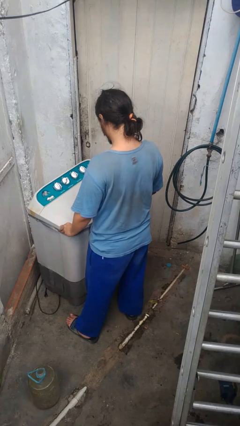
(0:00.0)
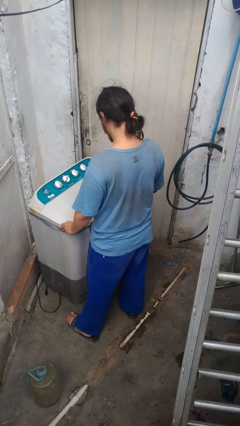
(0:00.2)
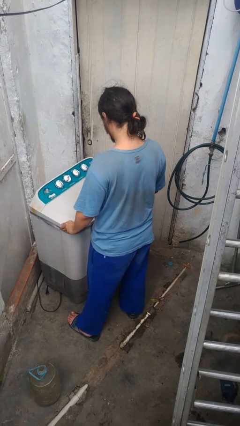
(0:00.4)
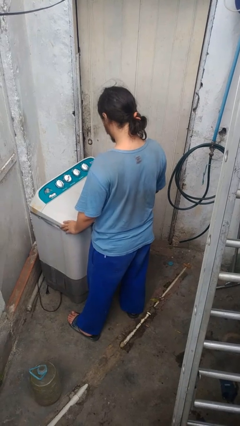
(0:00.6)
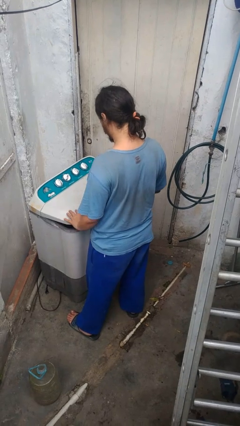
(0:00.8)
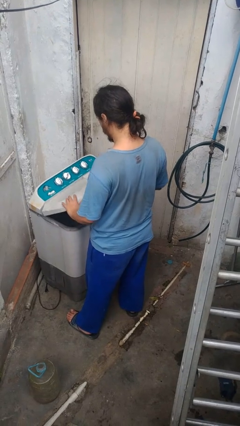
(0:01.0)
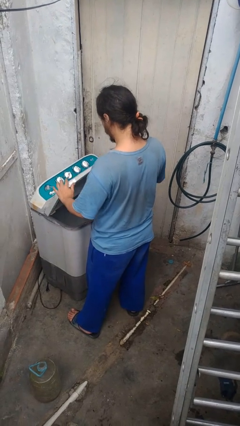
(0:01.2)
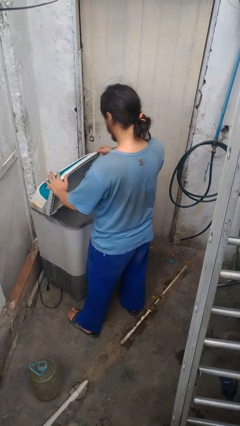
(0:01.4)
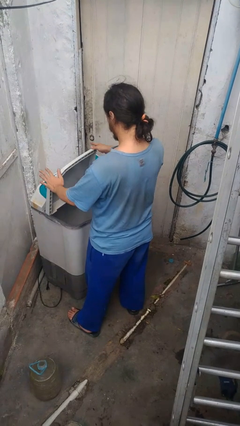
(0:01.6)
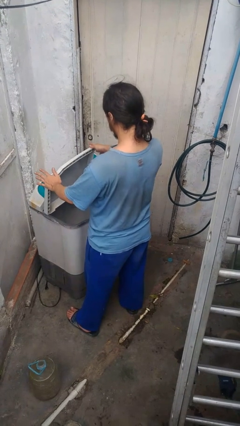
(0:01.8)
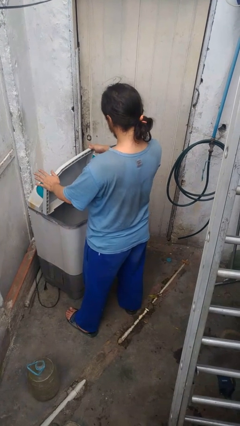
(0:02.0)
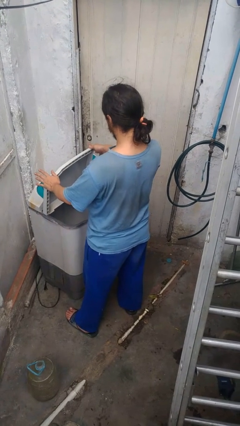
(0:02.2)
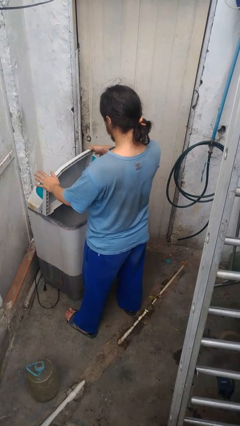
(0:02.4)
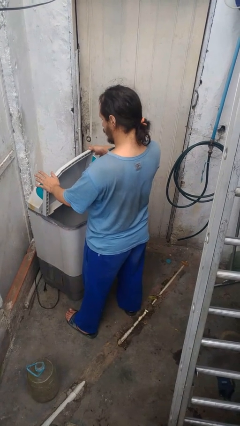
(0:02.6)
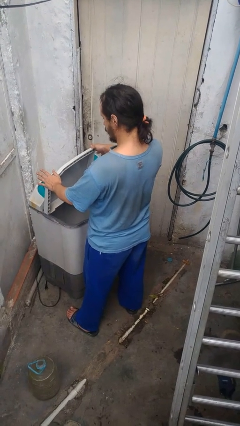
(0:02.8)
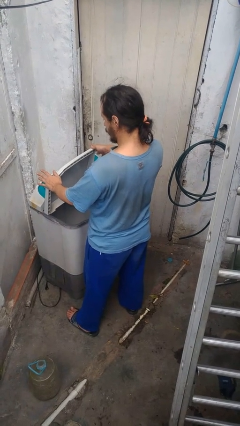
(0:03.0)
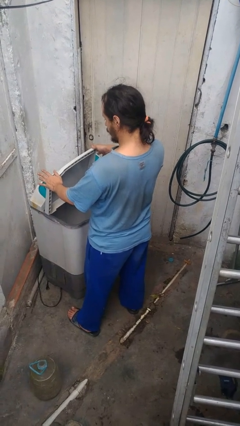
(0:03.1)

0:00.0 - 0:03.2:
person opens clothes washer

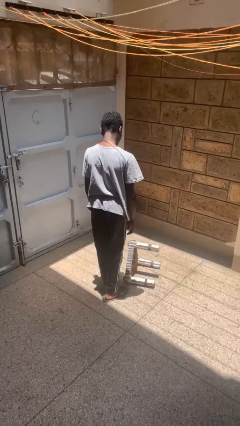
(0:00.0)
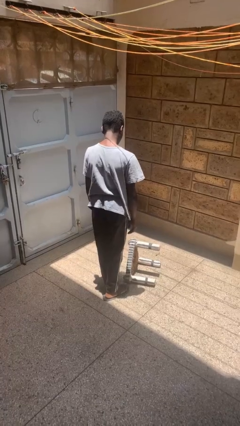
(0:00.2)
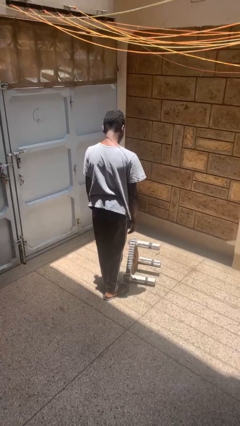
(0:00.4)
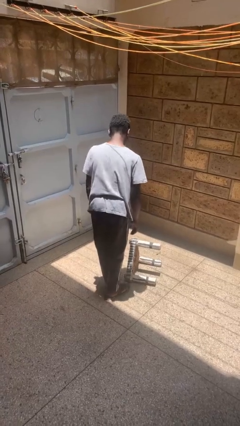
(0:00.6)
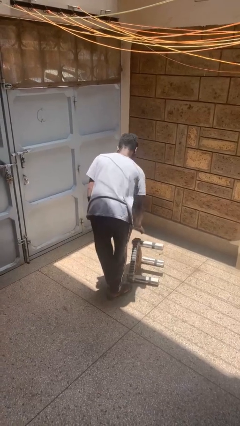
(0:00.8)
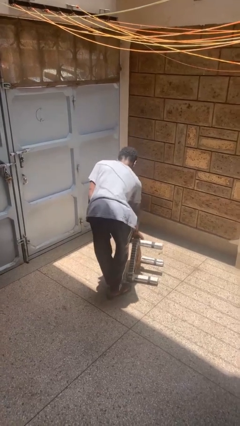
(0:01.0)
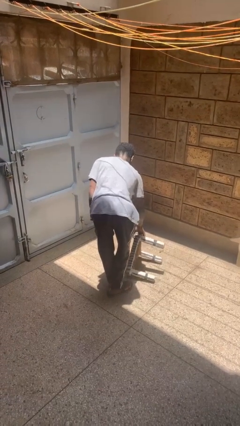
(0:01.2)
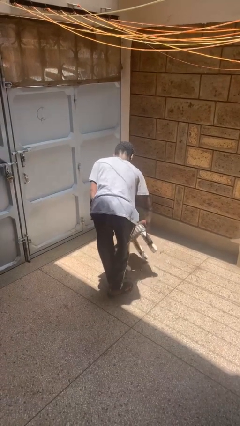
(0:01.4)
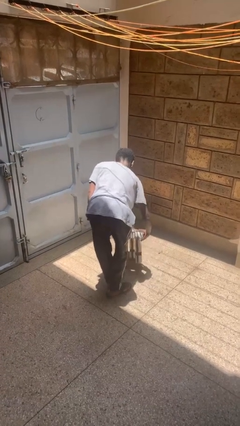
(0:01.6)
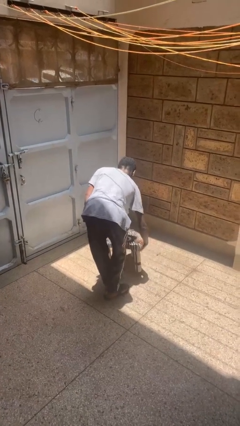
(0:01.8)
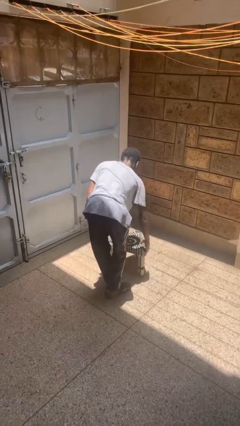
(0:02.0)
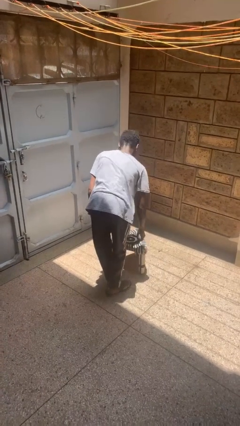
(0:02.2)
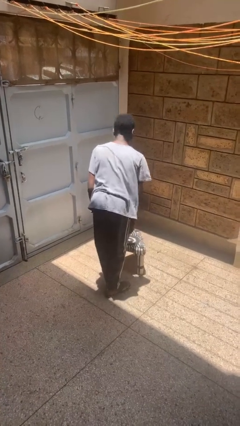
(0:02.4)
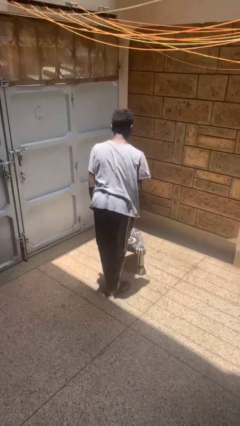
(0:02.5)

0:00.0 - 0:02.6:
person sets upright furniture

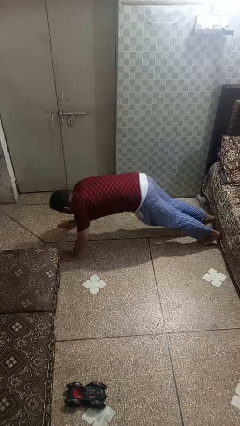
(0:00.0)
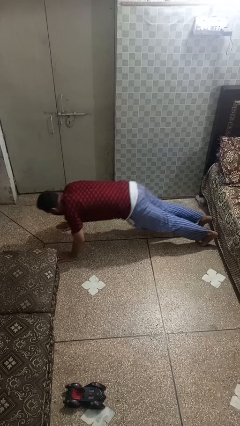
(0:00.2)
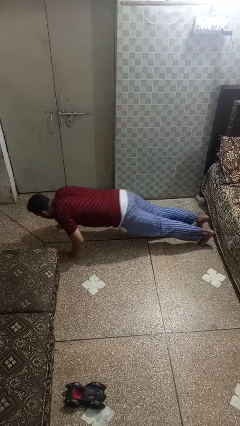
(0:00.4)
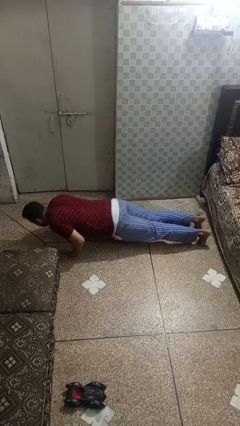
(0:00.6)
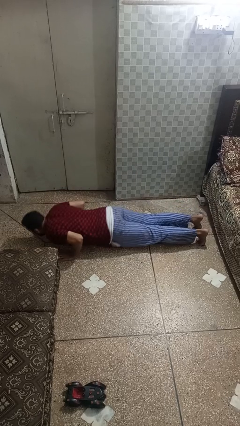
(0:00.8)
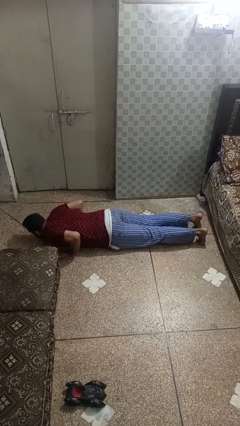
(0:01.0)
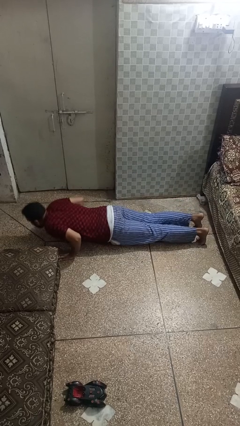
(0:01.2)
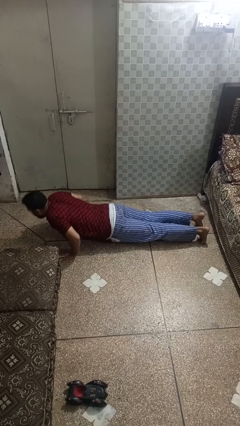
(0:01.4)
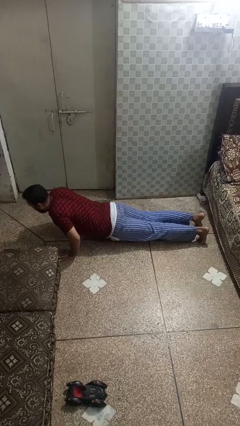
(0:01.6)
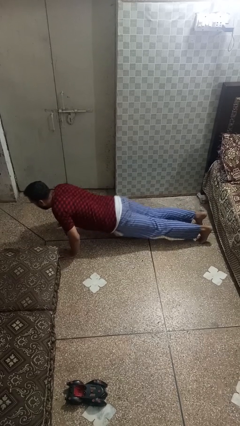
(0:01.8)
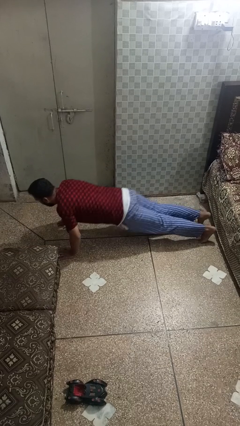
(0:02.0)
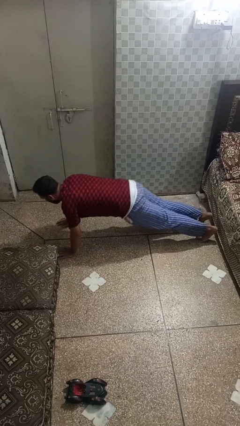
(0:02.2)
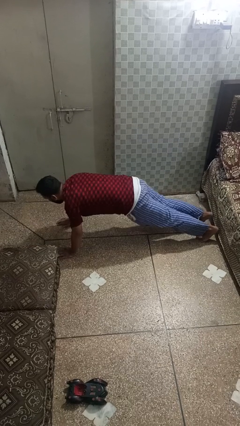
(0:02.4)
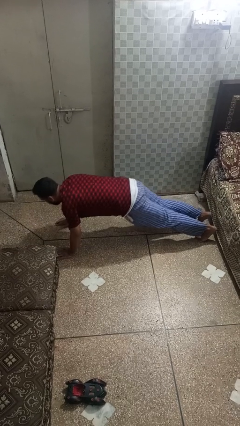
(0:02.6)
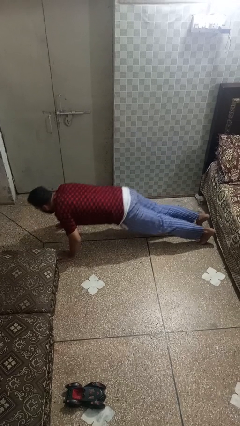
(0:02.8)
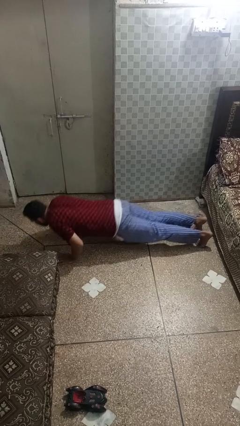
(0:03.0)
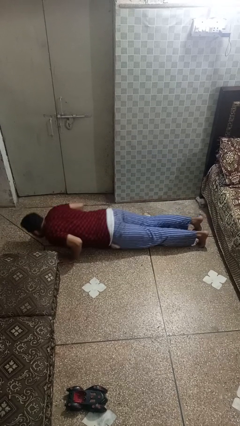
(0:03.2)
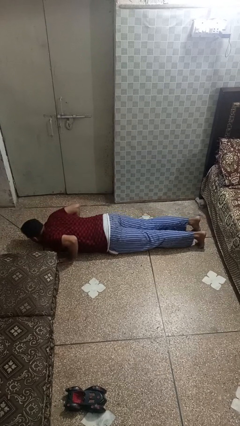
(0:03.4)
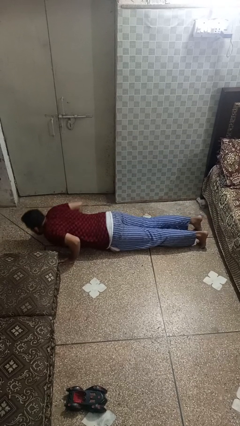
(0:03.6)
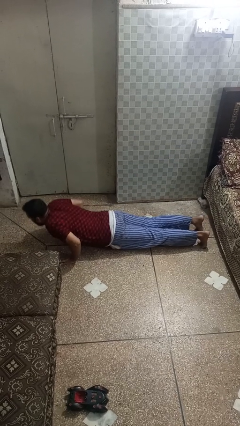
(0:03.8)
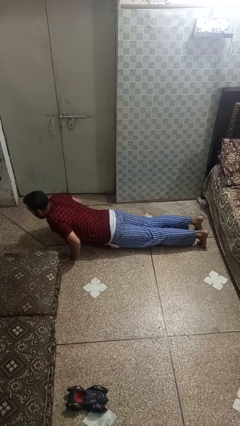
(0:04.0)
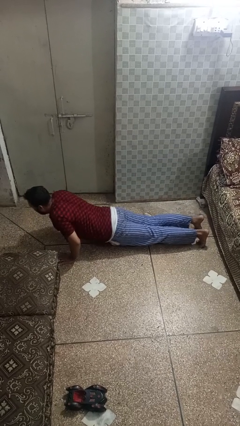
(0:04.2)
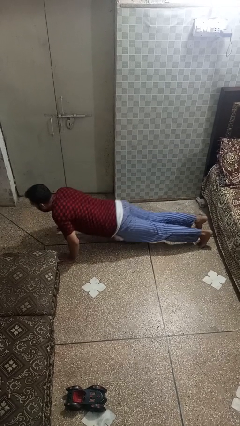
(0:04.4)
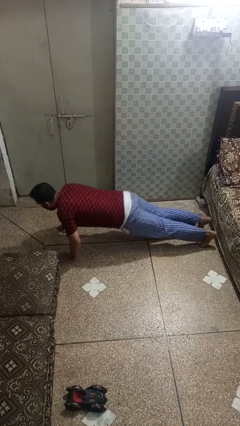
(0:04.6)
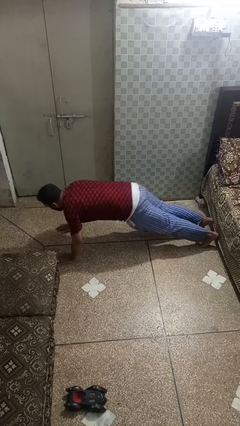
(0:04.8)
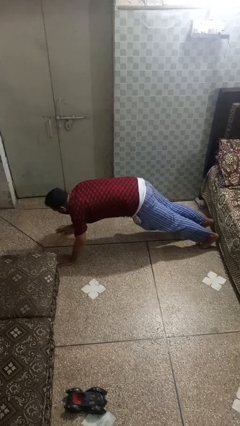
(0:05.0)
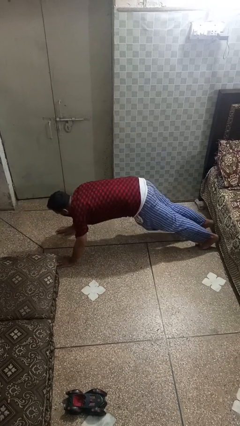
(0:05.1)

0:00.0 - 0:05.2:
person exercises with pushup

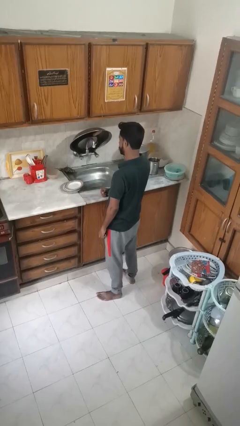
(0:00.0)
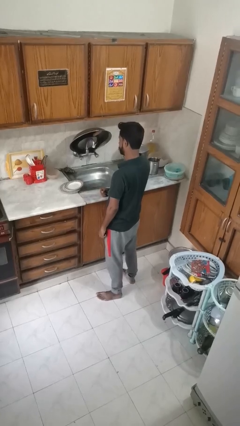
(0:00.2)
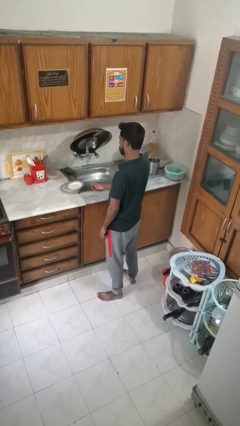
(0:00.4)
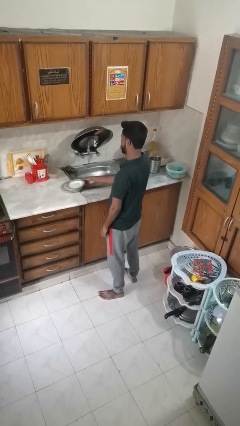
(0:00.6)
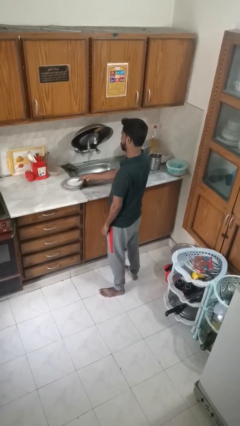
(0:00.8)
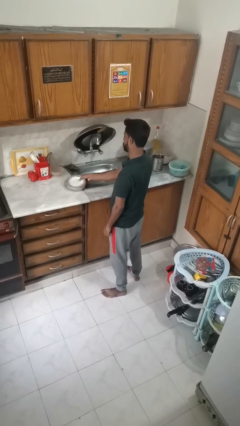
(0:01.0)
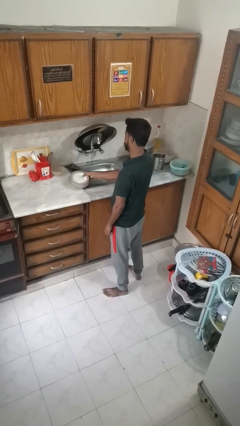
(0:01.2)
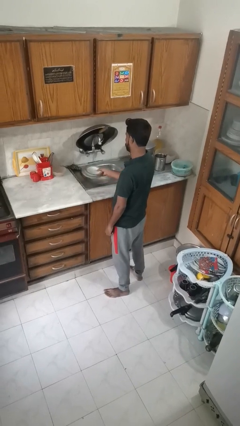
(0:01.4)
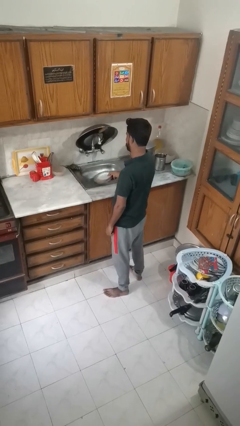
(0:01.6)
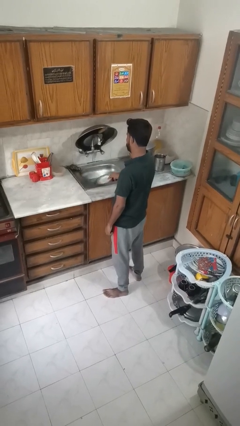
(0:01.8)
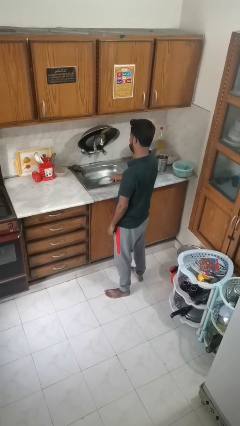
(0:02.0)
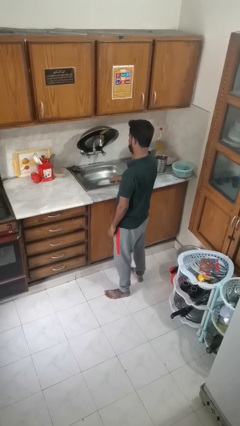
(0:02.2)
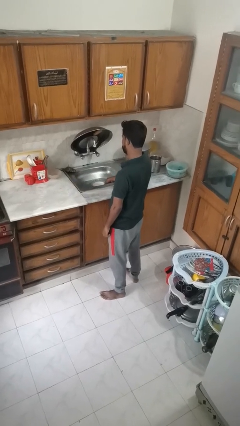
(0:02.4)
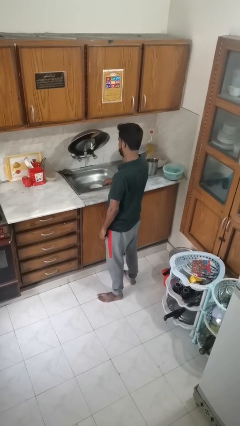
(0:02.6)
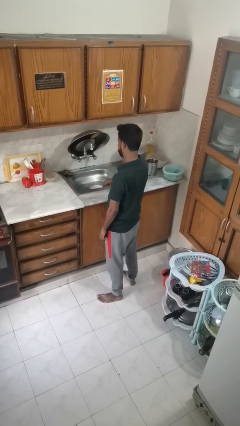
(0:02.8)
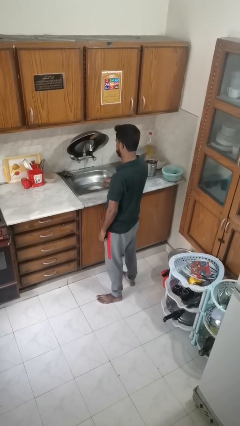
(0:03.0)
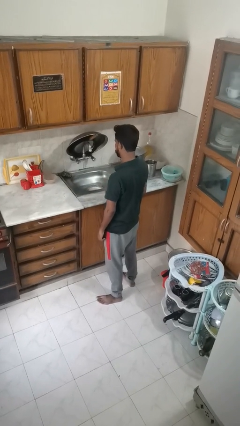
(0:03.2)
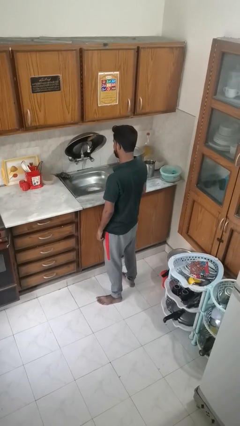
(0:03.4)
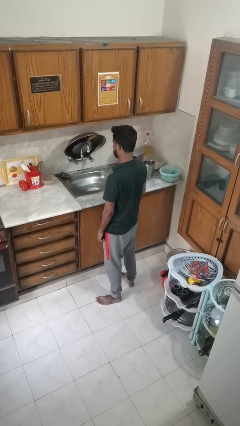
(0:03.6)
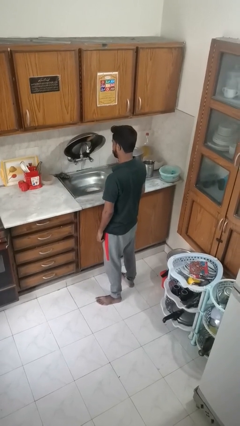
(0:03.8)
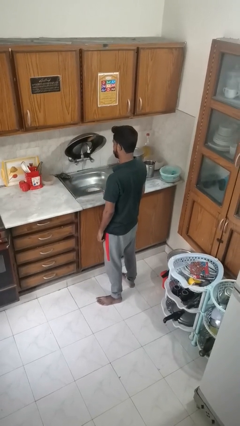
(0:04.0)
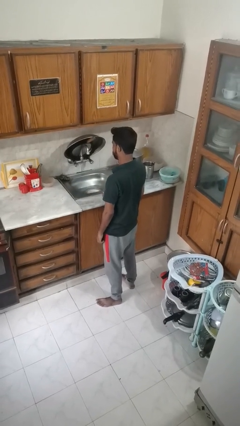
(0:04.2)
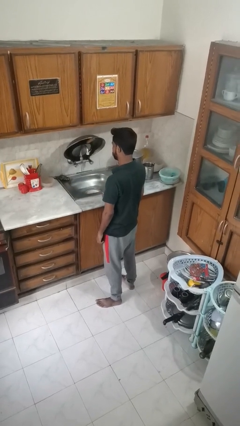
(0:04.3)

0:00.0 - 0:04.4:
person opens dishwasher

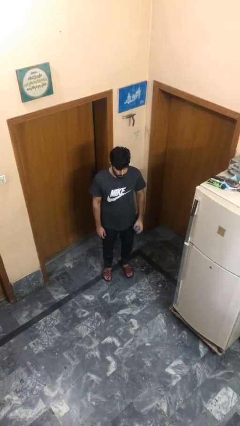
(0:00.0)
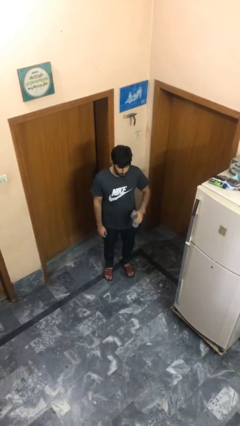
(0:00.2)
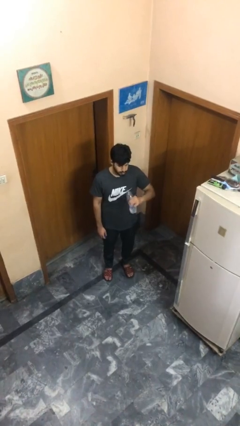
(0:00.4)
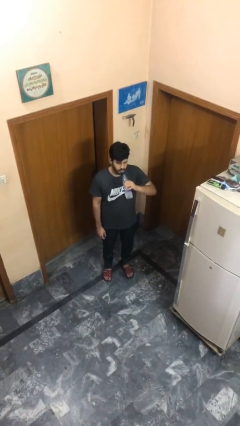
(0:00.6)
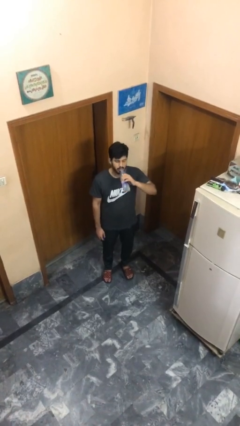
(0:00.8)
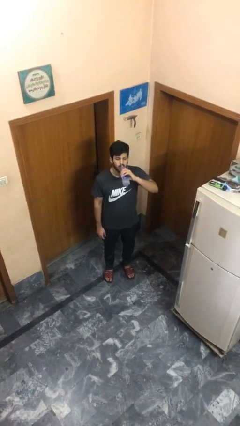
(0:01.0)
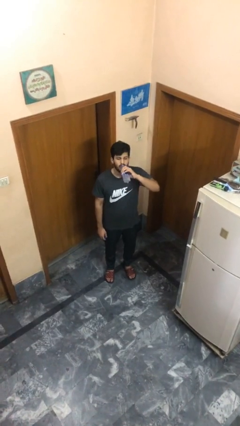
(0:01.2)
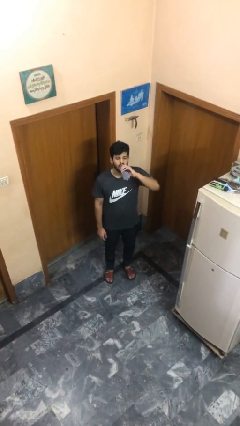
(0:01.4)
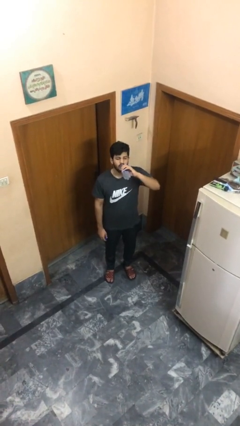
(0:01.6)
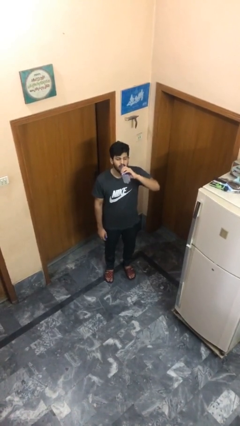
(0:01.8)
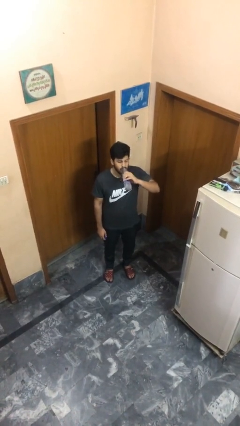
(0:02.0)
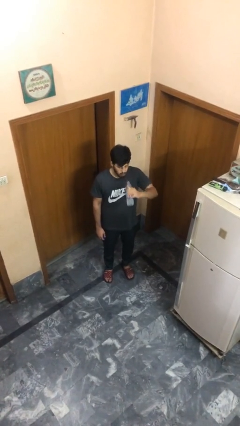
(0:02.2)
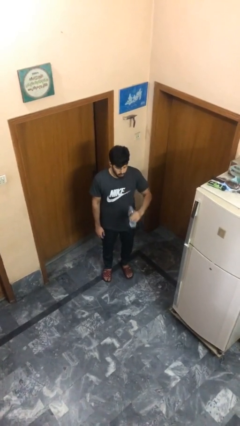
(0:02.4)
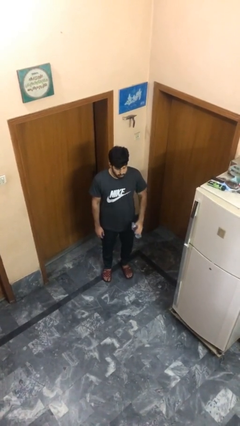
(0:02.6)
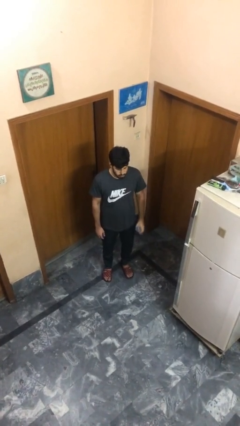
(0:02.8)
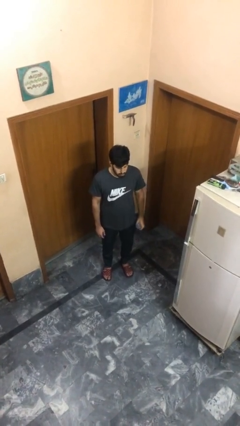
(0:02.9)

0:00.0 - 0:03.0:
person drinks from bottle
